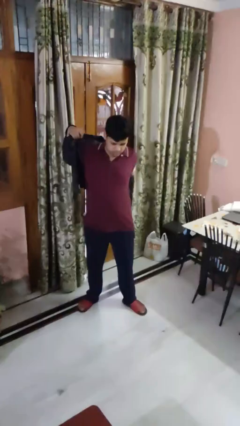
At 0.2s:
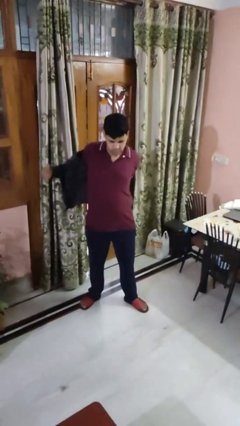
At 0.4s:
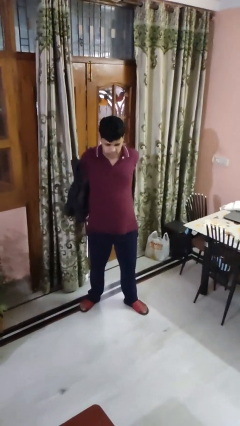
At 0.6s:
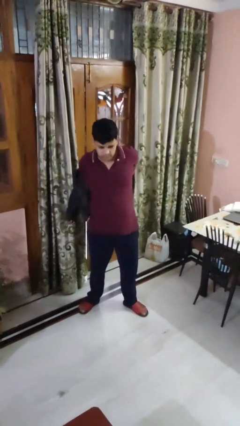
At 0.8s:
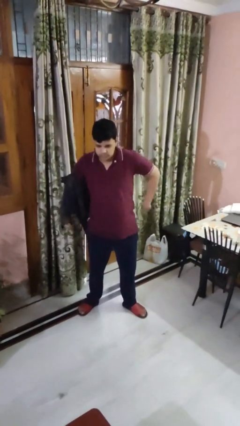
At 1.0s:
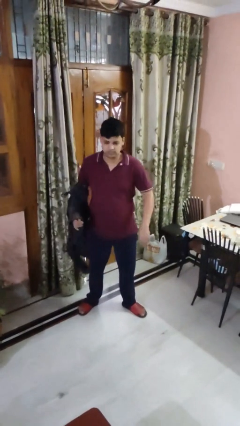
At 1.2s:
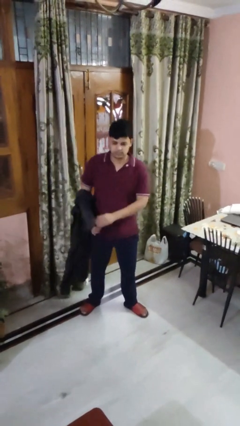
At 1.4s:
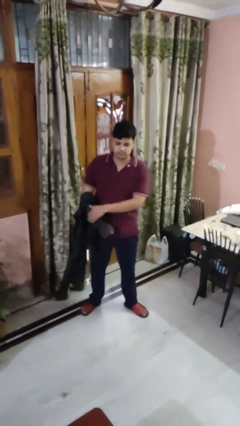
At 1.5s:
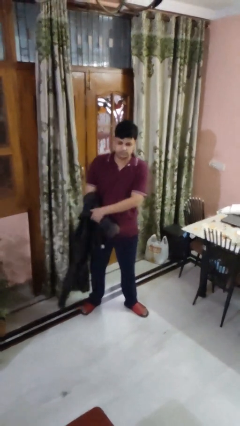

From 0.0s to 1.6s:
person takes off shirt

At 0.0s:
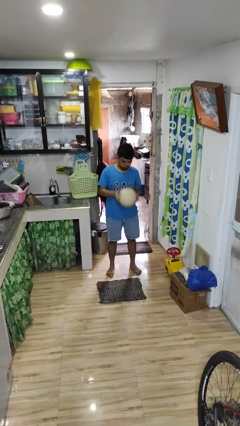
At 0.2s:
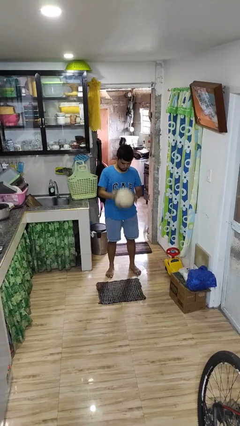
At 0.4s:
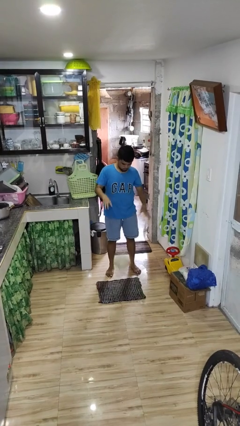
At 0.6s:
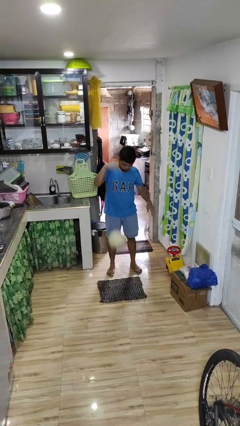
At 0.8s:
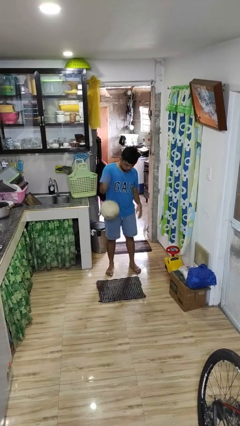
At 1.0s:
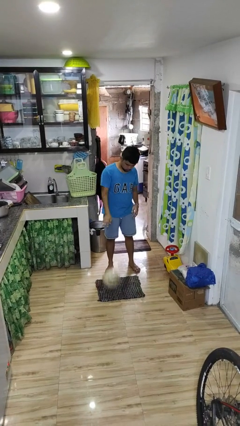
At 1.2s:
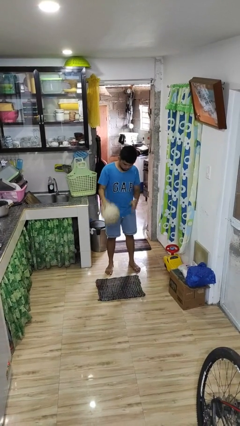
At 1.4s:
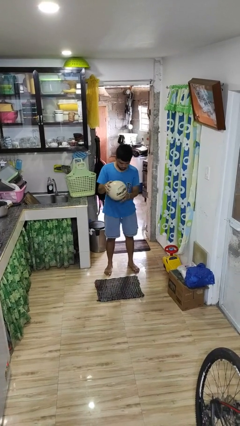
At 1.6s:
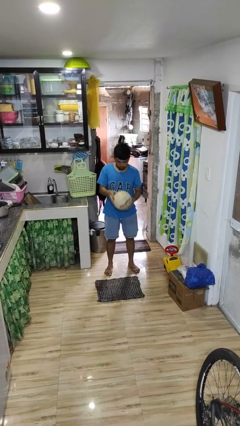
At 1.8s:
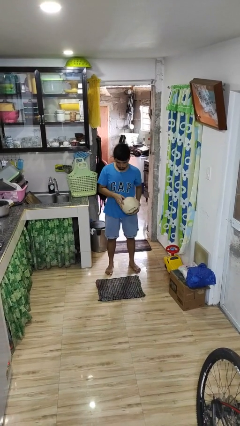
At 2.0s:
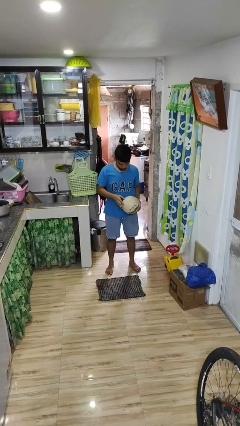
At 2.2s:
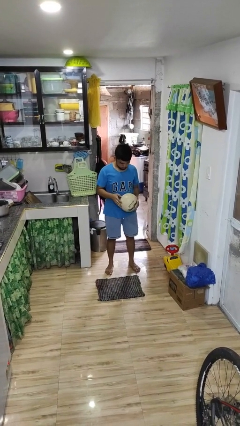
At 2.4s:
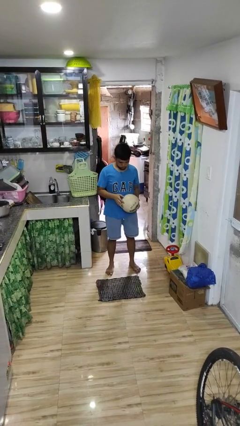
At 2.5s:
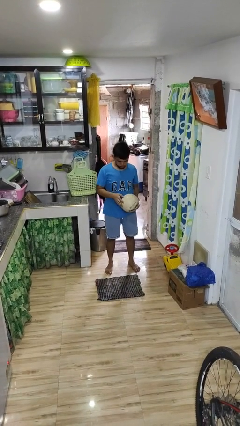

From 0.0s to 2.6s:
person bounces ball on floor

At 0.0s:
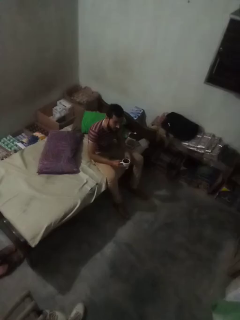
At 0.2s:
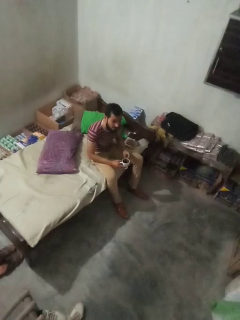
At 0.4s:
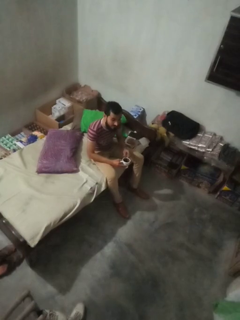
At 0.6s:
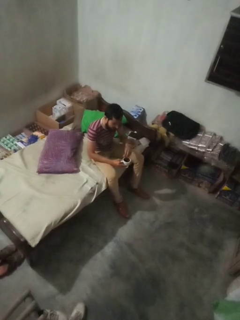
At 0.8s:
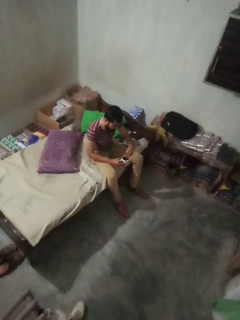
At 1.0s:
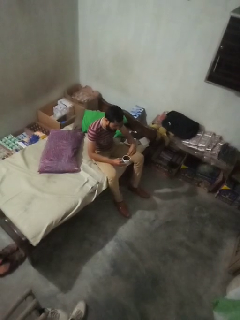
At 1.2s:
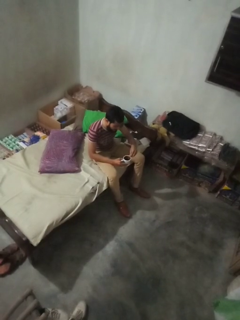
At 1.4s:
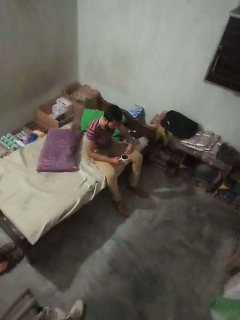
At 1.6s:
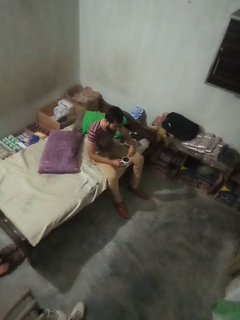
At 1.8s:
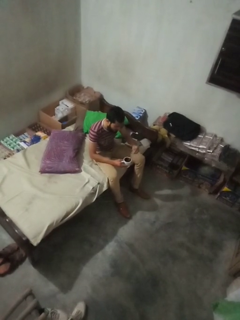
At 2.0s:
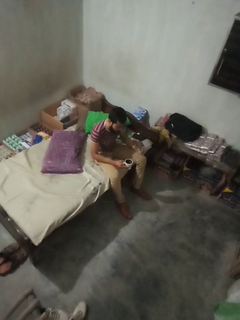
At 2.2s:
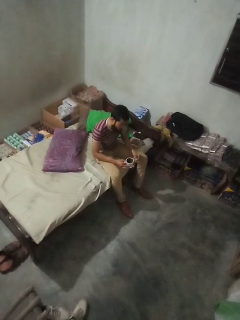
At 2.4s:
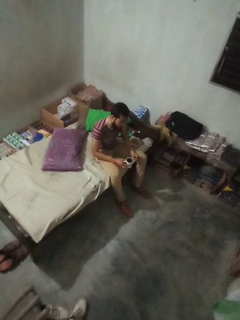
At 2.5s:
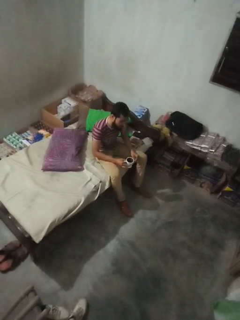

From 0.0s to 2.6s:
person stirs mug

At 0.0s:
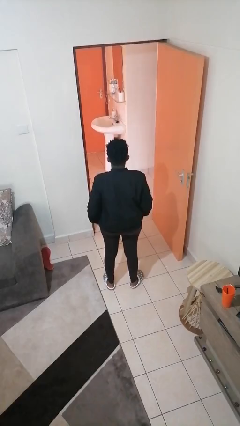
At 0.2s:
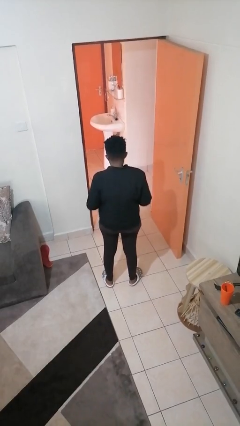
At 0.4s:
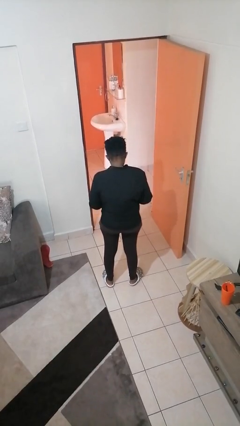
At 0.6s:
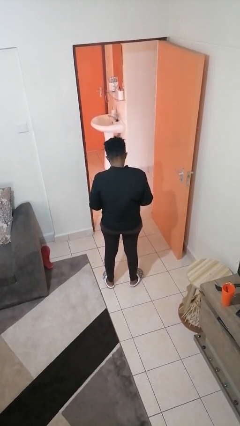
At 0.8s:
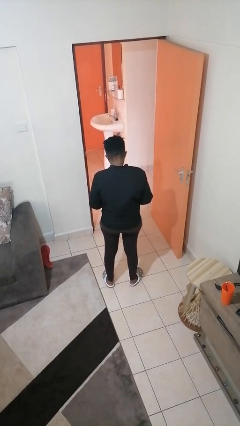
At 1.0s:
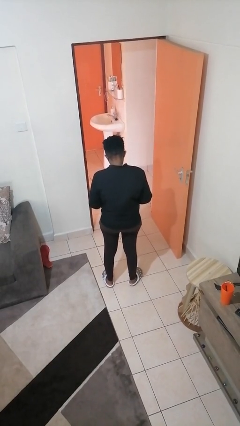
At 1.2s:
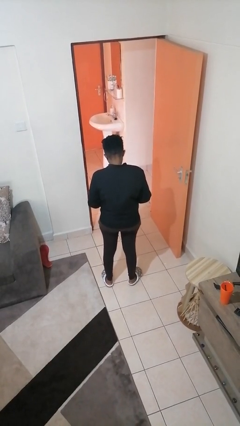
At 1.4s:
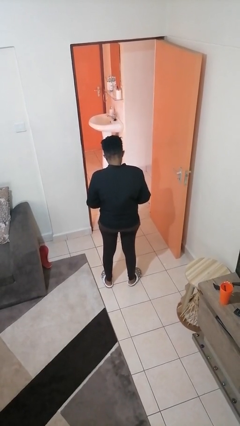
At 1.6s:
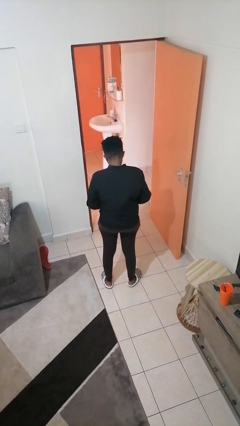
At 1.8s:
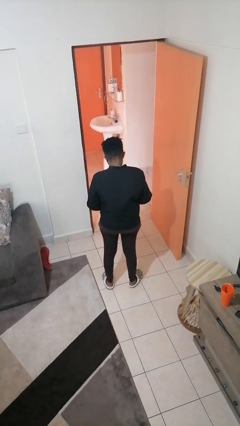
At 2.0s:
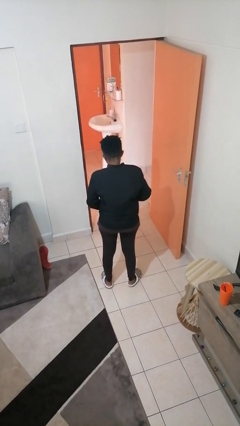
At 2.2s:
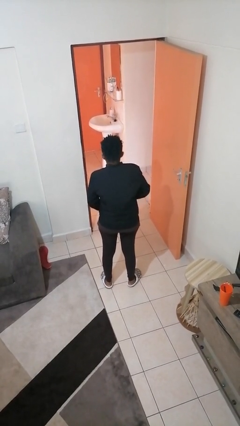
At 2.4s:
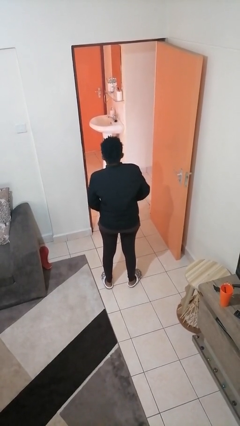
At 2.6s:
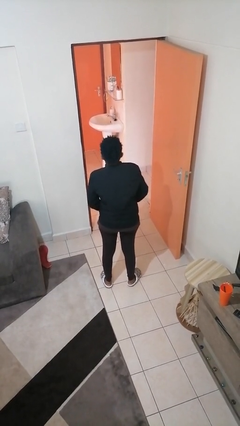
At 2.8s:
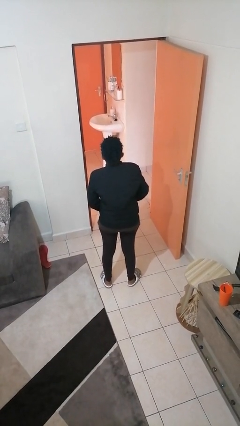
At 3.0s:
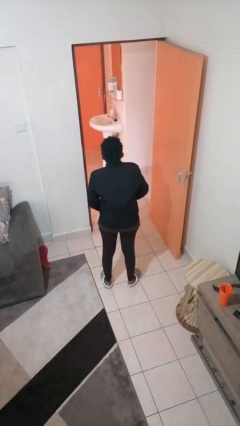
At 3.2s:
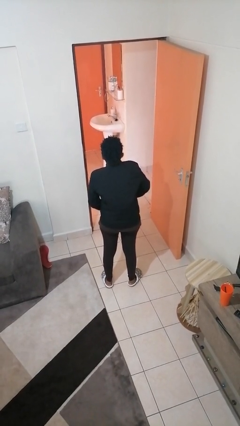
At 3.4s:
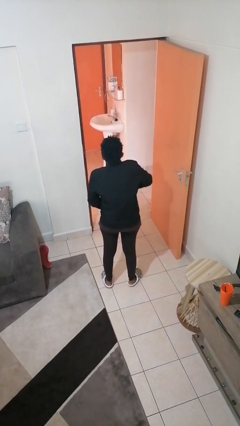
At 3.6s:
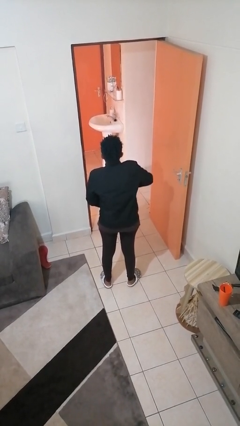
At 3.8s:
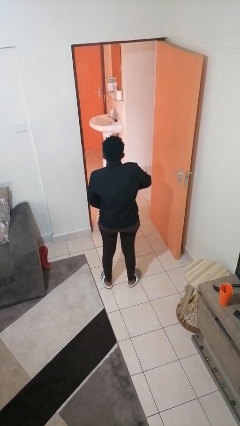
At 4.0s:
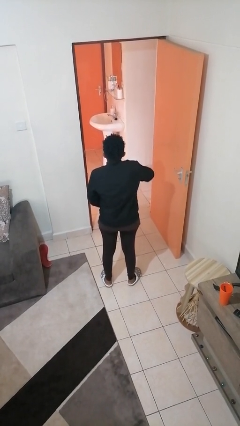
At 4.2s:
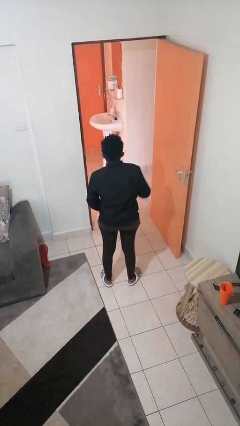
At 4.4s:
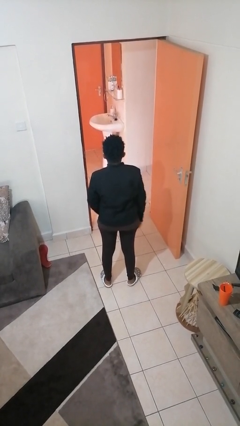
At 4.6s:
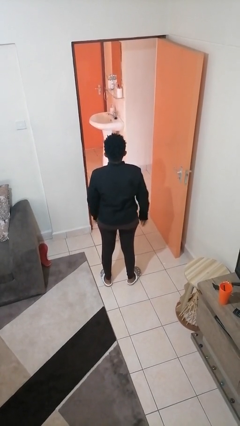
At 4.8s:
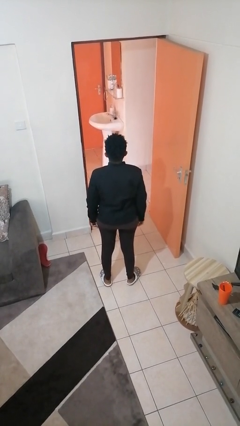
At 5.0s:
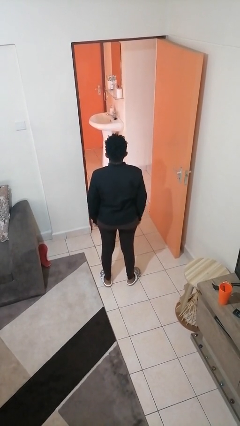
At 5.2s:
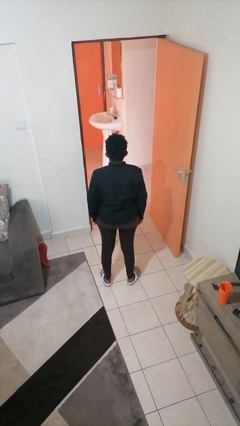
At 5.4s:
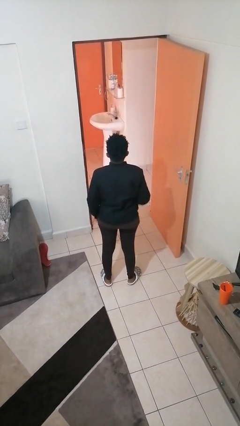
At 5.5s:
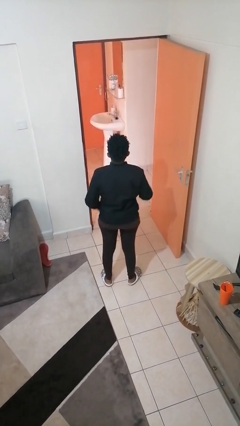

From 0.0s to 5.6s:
person zips up jacket

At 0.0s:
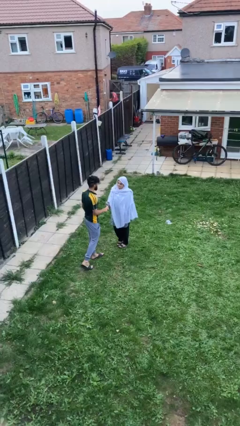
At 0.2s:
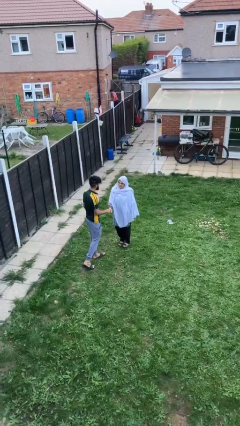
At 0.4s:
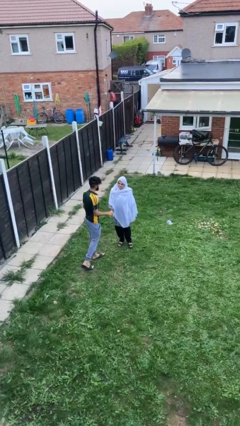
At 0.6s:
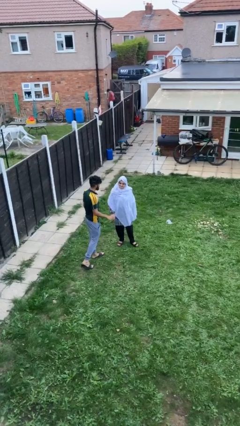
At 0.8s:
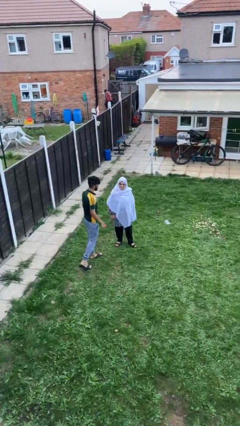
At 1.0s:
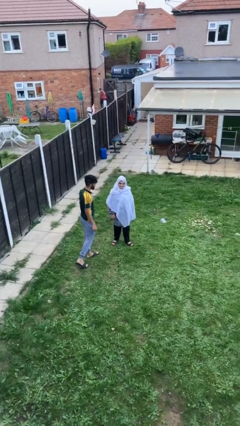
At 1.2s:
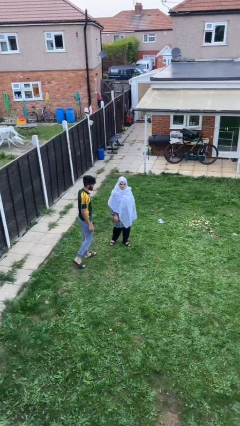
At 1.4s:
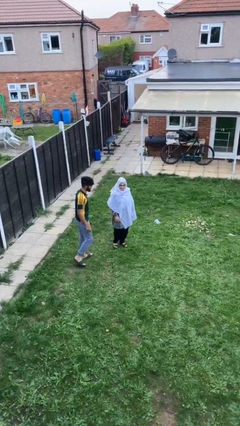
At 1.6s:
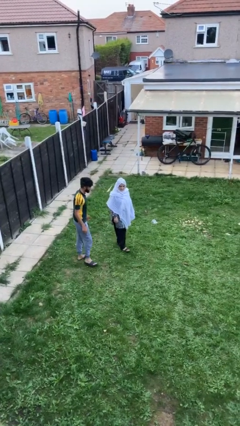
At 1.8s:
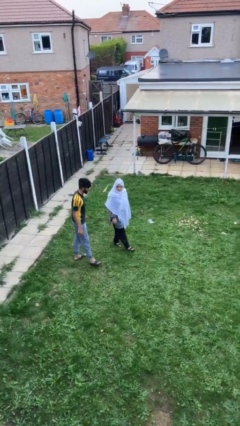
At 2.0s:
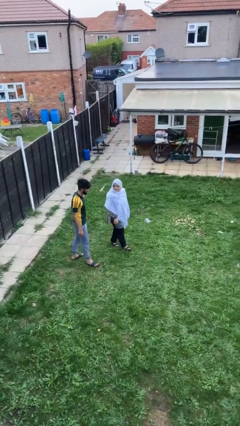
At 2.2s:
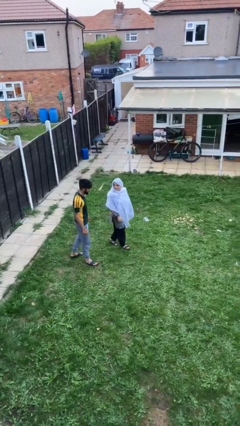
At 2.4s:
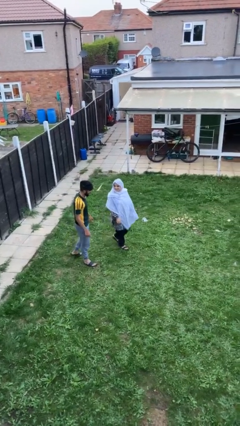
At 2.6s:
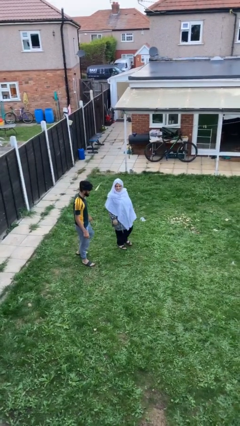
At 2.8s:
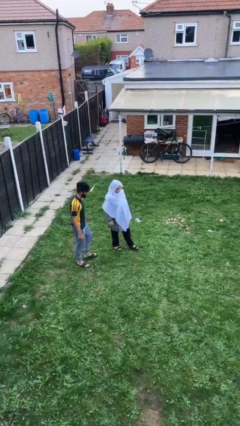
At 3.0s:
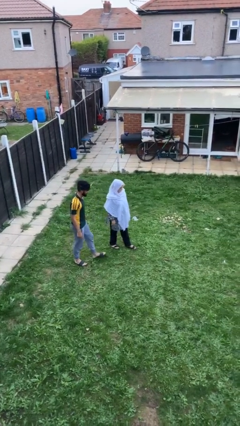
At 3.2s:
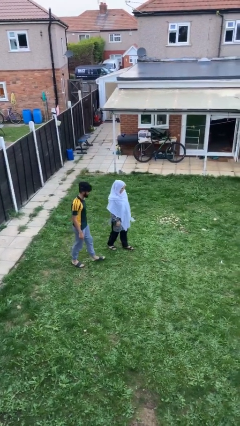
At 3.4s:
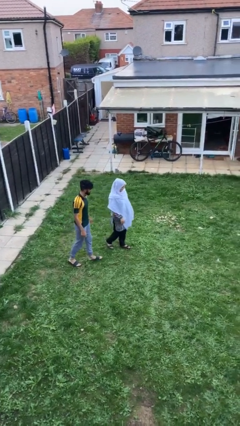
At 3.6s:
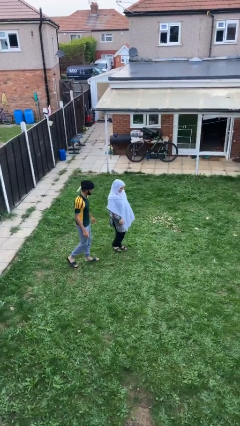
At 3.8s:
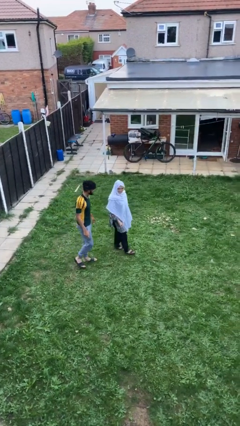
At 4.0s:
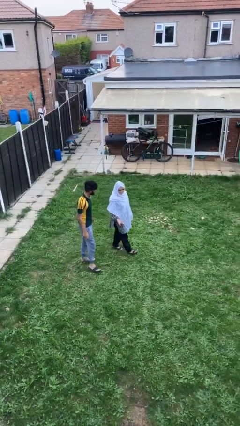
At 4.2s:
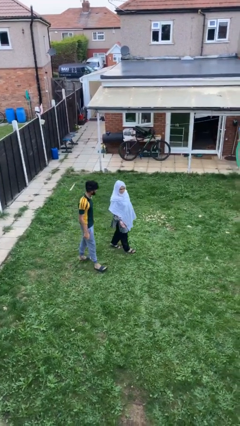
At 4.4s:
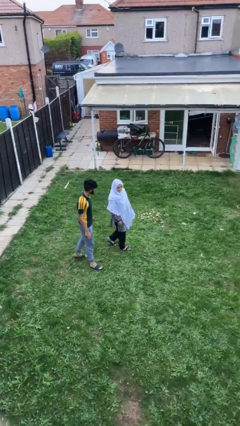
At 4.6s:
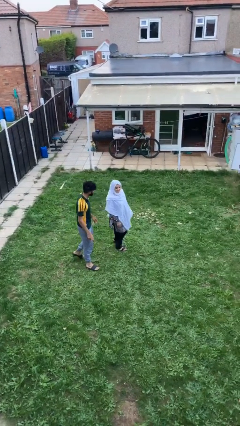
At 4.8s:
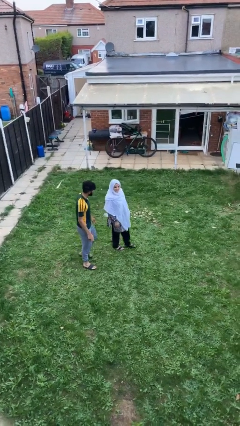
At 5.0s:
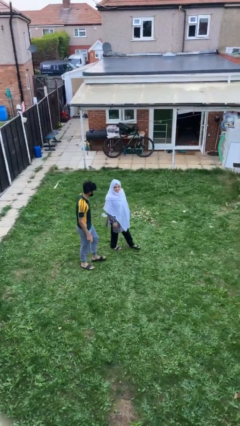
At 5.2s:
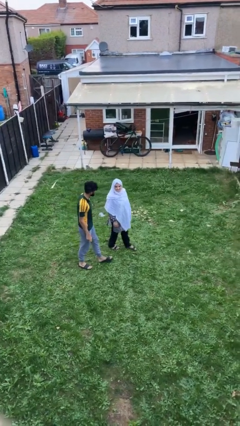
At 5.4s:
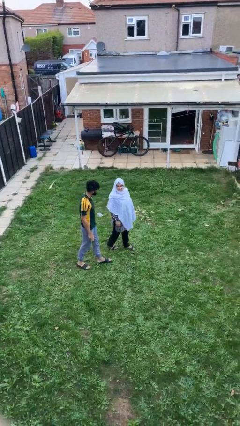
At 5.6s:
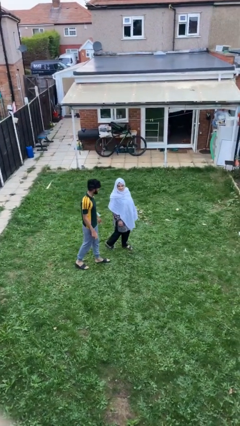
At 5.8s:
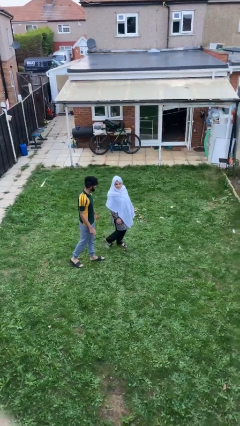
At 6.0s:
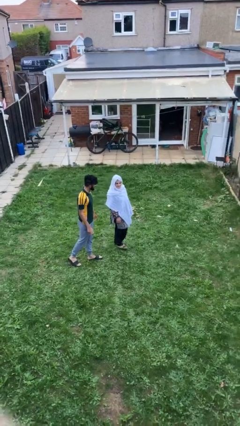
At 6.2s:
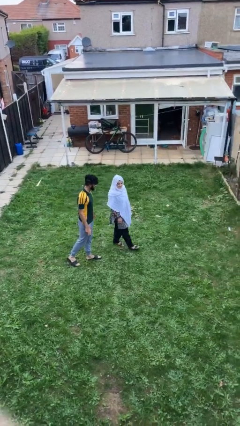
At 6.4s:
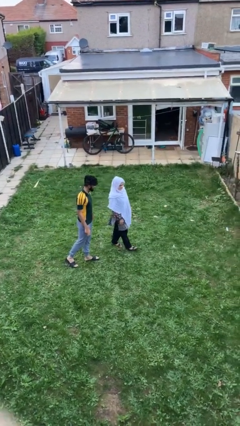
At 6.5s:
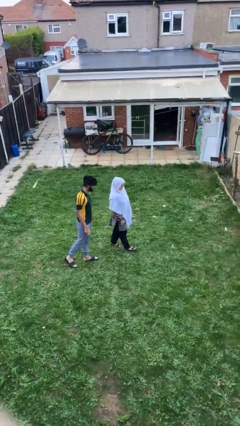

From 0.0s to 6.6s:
person talks to person
